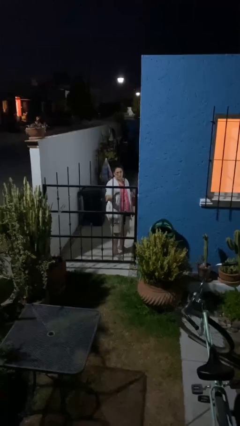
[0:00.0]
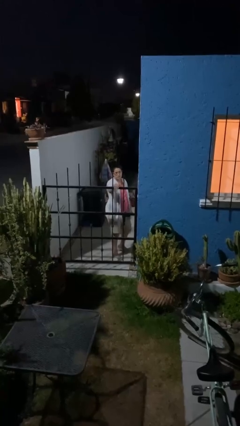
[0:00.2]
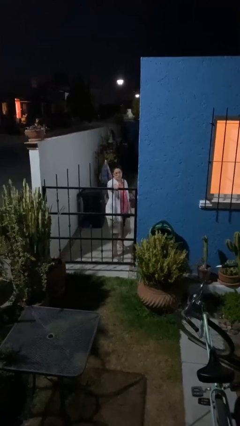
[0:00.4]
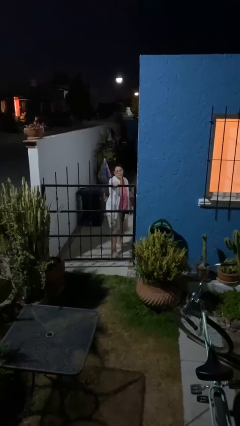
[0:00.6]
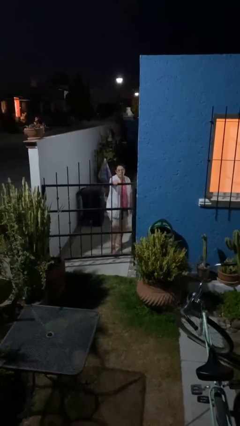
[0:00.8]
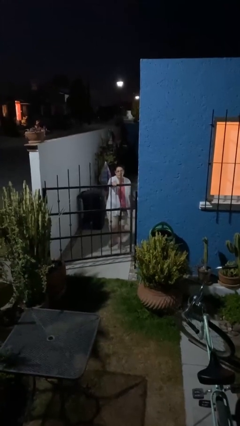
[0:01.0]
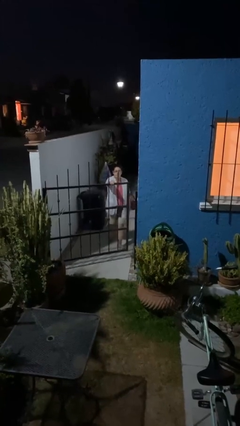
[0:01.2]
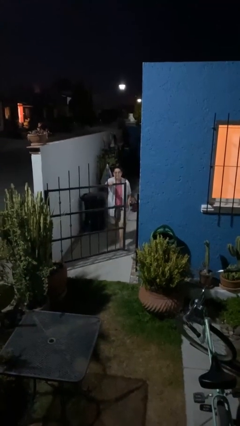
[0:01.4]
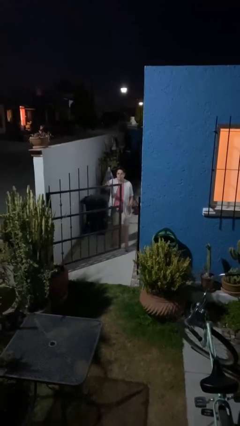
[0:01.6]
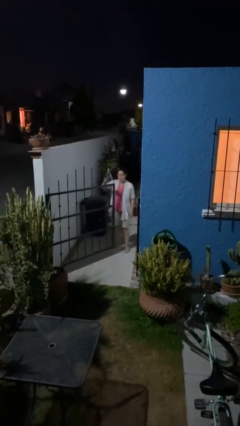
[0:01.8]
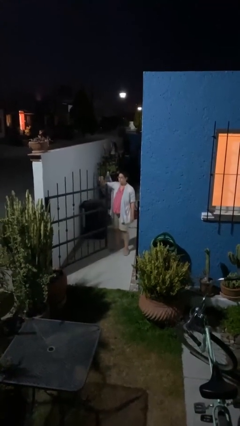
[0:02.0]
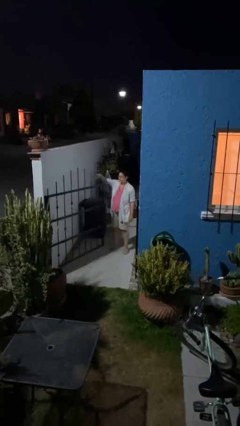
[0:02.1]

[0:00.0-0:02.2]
person opens facility door

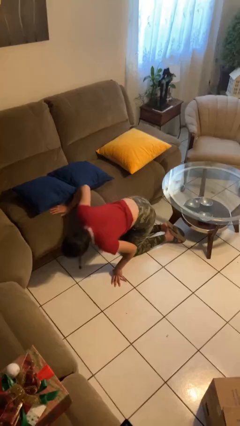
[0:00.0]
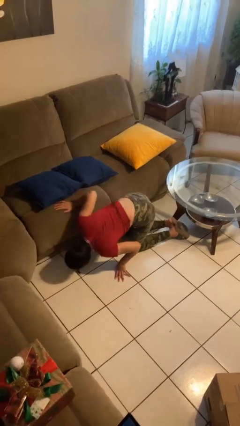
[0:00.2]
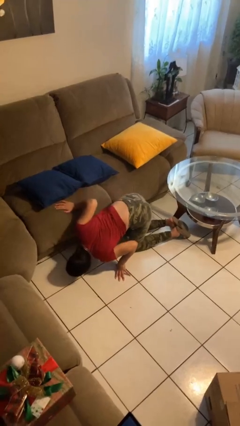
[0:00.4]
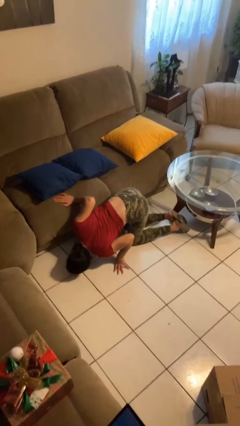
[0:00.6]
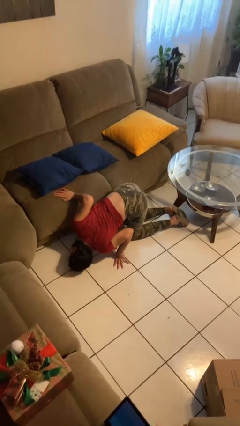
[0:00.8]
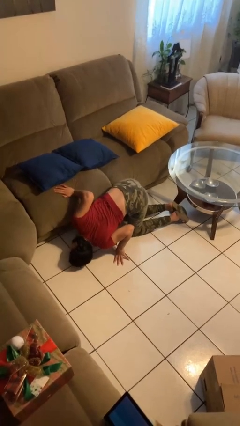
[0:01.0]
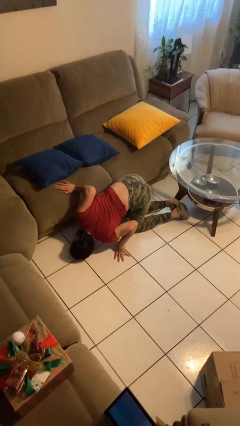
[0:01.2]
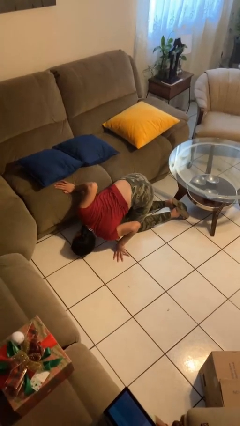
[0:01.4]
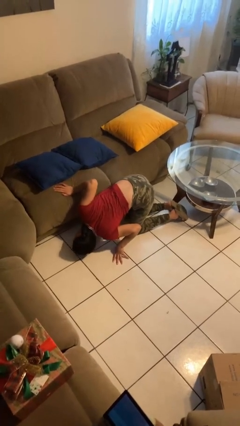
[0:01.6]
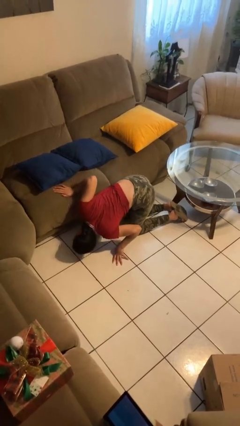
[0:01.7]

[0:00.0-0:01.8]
person searches under couch

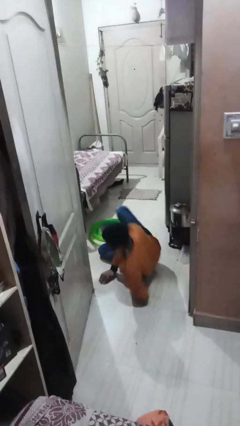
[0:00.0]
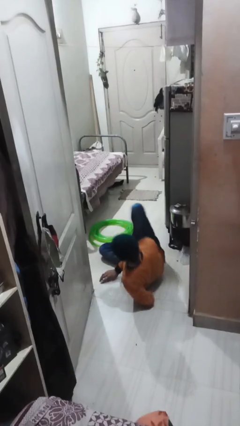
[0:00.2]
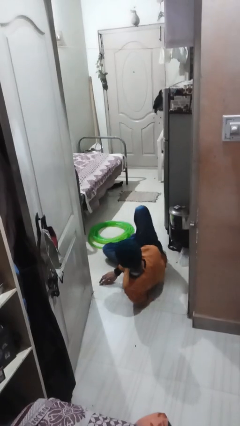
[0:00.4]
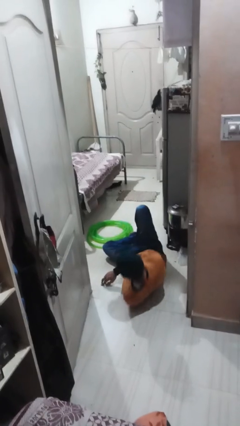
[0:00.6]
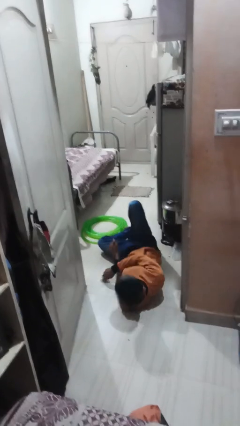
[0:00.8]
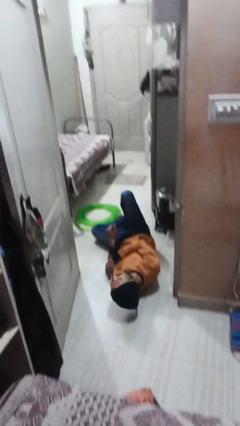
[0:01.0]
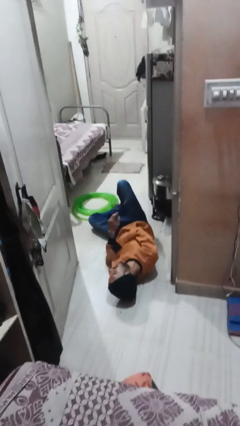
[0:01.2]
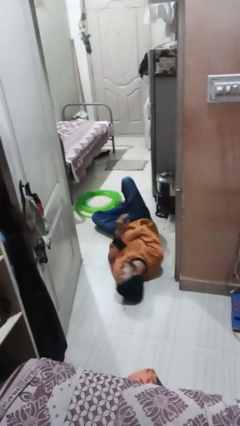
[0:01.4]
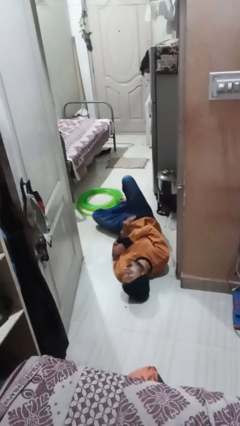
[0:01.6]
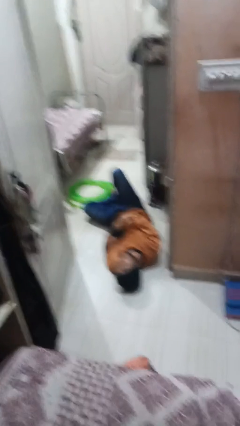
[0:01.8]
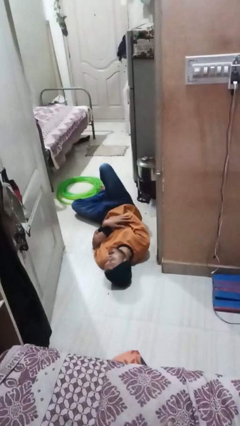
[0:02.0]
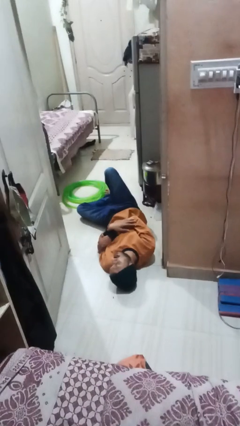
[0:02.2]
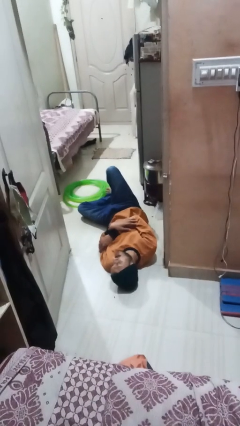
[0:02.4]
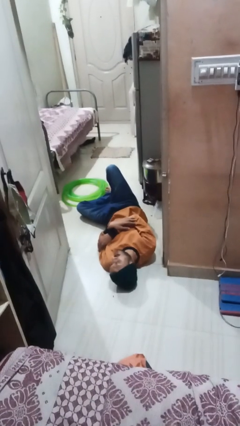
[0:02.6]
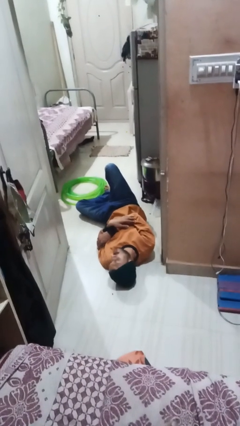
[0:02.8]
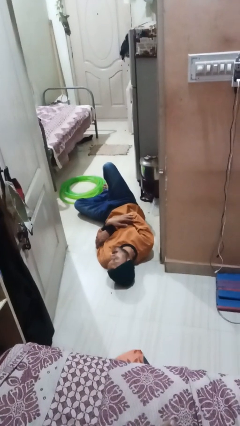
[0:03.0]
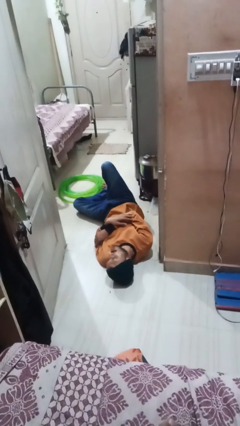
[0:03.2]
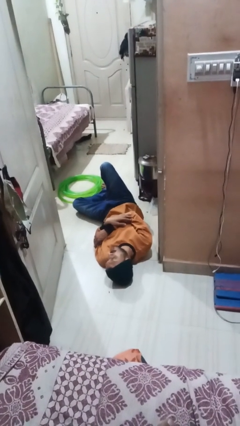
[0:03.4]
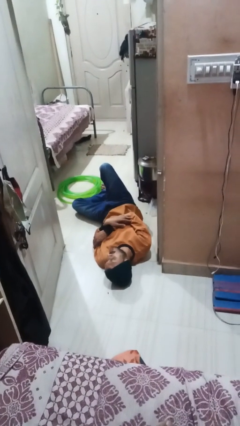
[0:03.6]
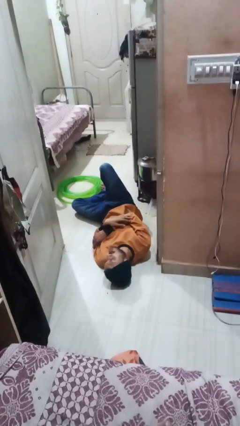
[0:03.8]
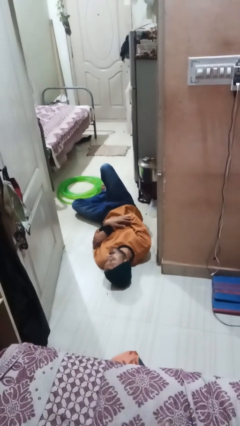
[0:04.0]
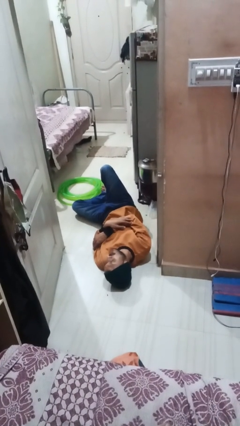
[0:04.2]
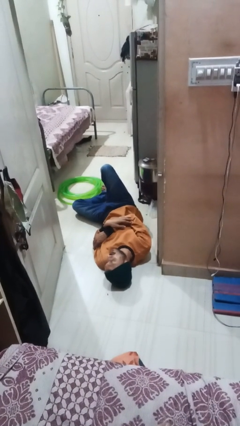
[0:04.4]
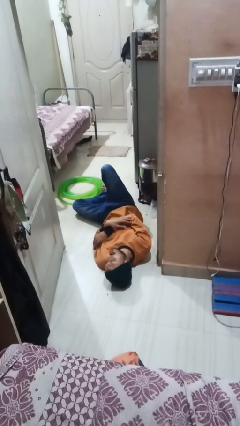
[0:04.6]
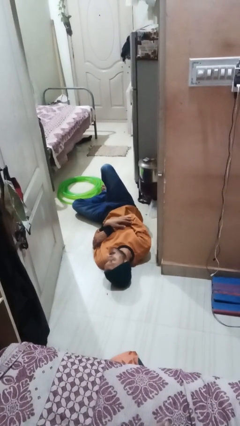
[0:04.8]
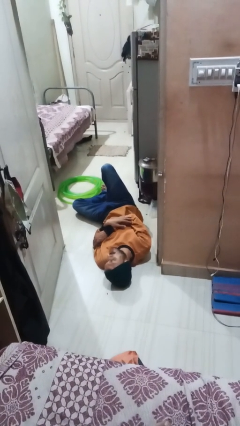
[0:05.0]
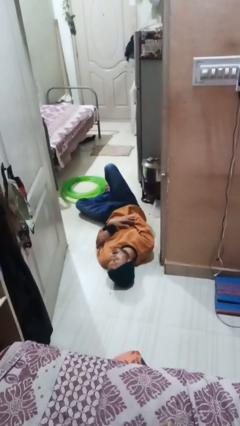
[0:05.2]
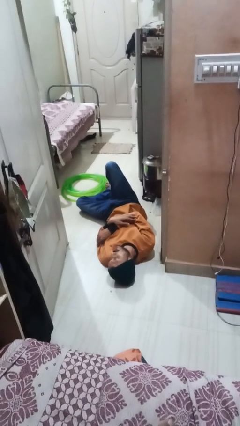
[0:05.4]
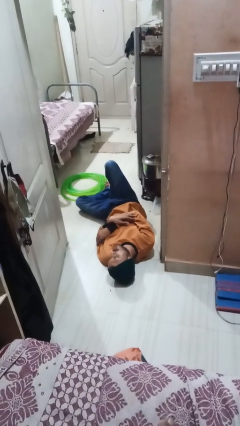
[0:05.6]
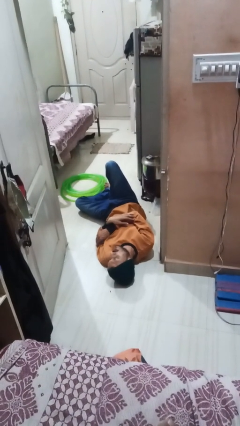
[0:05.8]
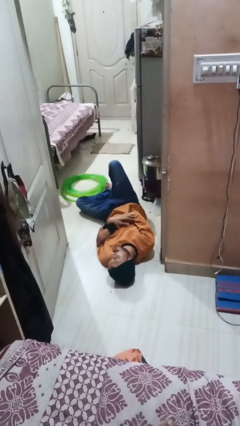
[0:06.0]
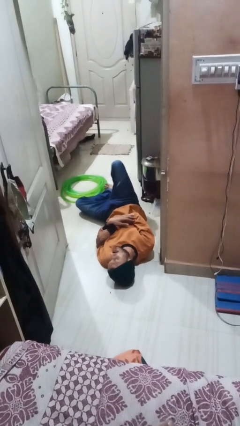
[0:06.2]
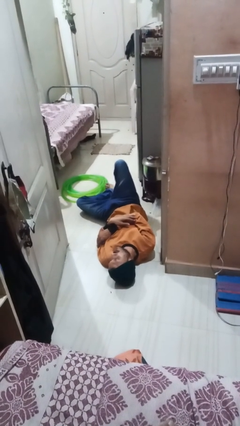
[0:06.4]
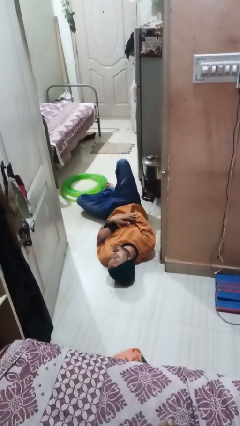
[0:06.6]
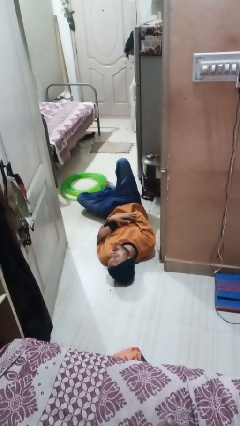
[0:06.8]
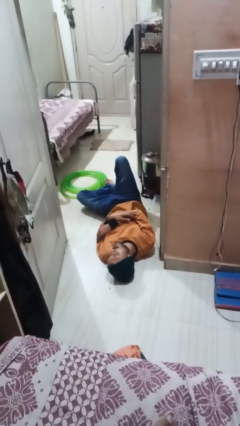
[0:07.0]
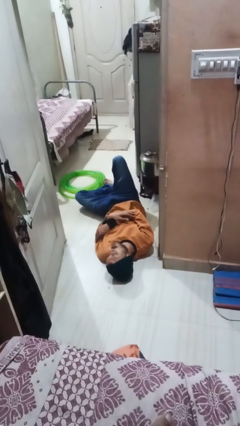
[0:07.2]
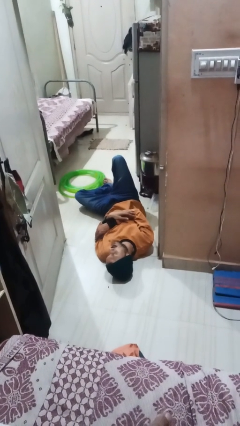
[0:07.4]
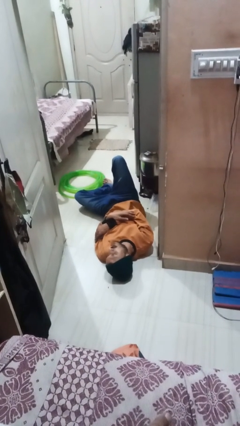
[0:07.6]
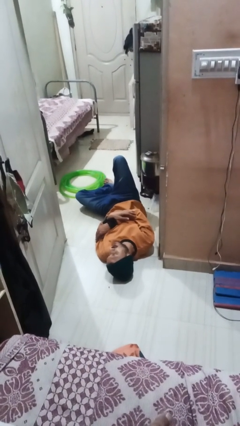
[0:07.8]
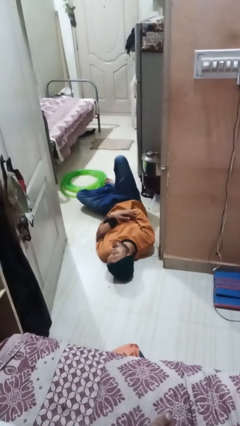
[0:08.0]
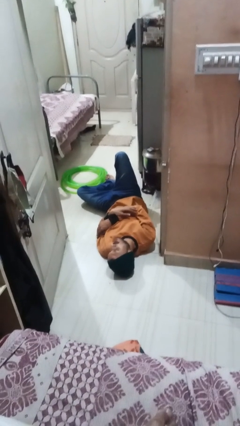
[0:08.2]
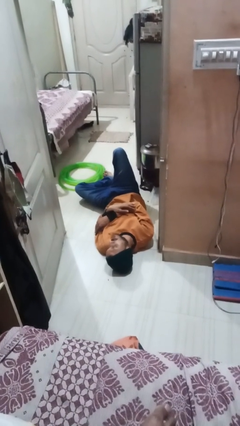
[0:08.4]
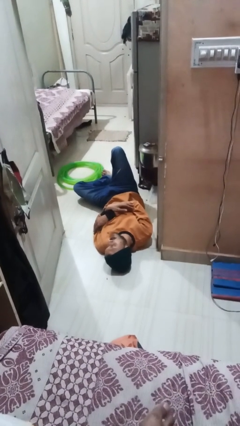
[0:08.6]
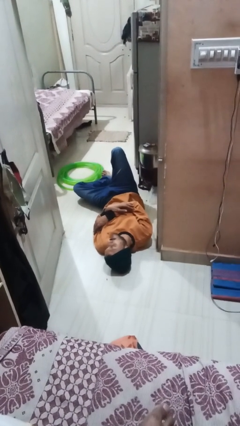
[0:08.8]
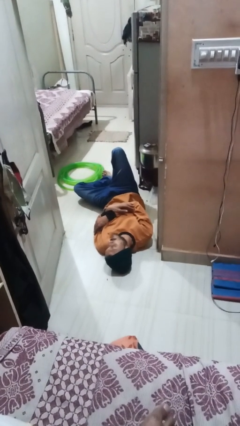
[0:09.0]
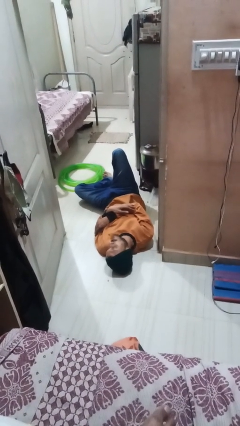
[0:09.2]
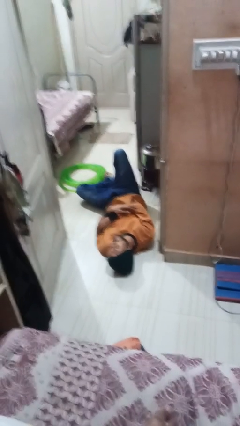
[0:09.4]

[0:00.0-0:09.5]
person lies down on floor

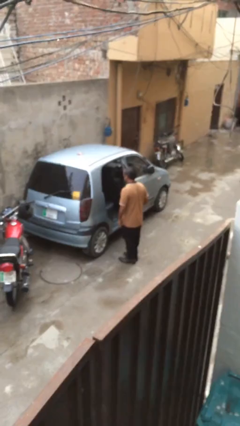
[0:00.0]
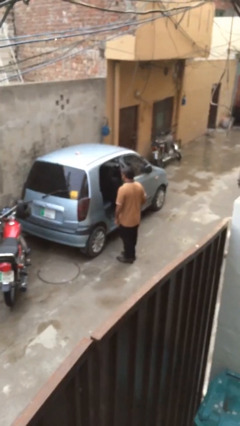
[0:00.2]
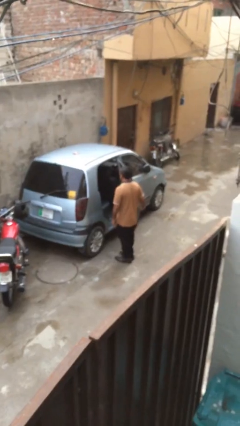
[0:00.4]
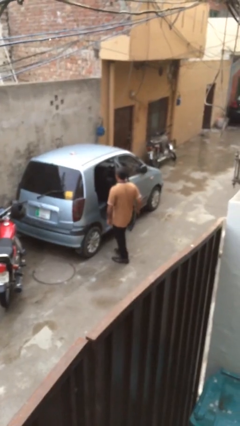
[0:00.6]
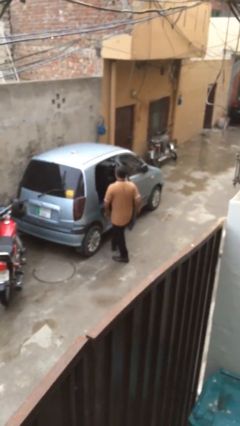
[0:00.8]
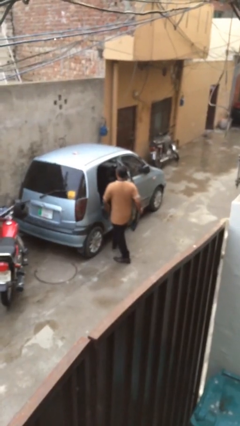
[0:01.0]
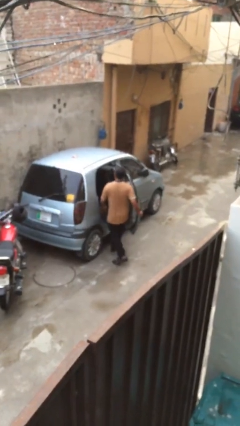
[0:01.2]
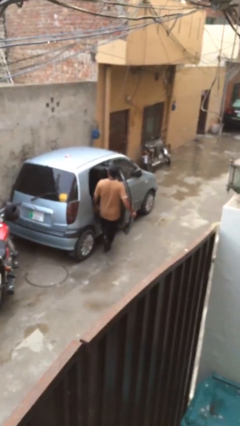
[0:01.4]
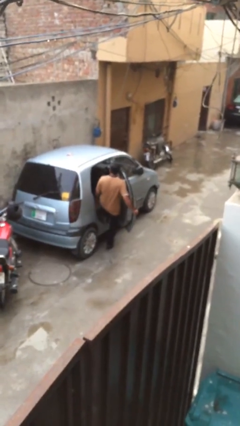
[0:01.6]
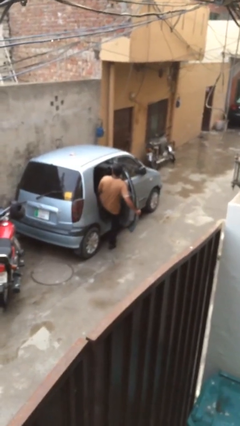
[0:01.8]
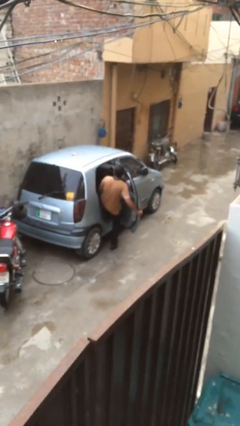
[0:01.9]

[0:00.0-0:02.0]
person enters car

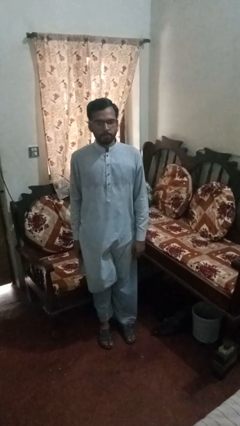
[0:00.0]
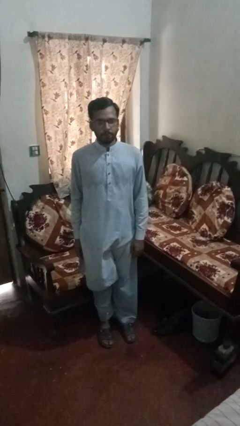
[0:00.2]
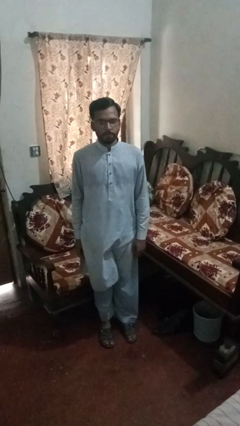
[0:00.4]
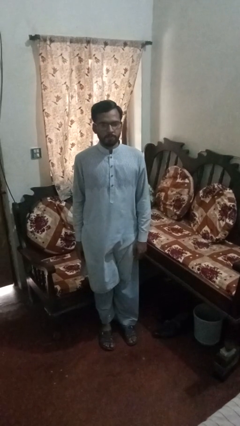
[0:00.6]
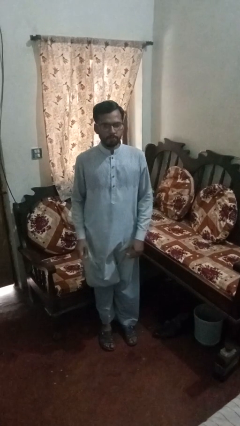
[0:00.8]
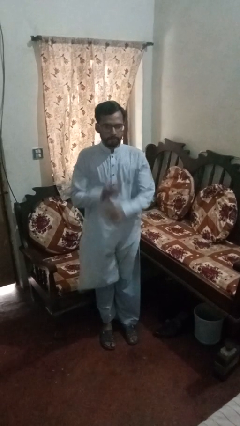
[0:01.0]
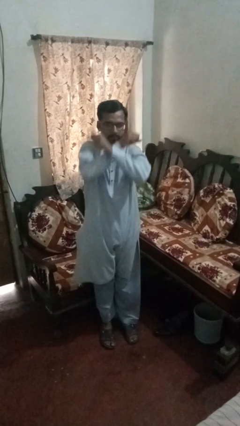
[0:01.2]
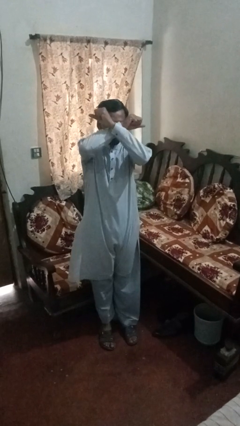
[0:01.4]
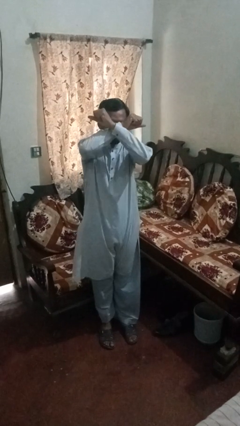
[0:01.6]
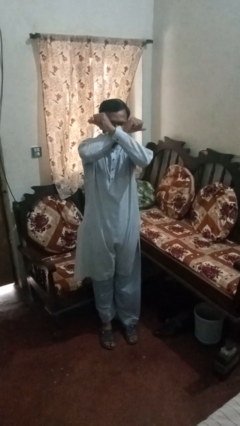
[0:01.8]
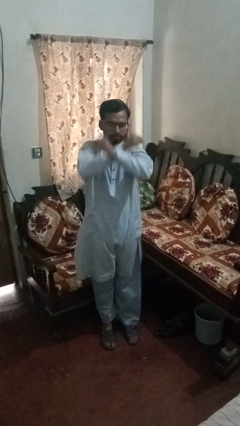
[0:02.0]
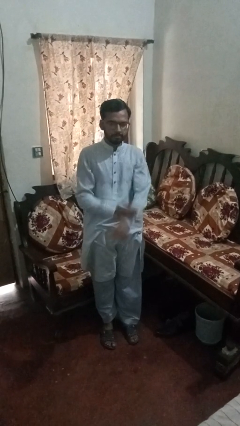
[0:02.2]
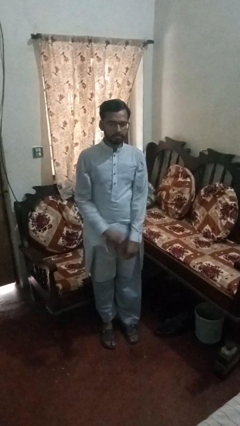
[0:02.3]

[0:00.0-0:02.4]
person karate chop
